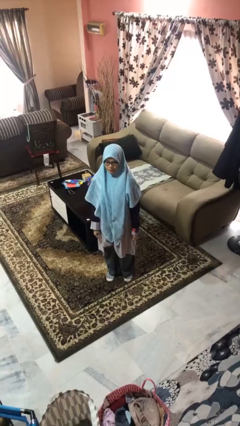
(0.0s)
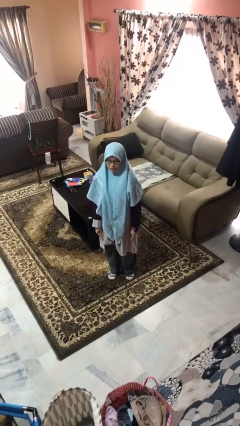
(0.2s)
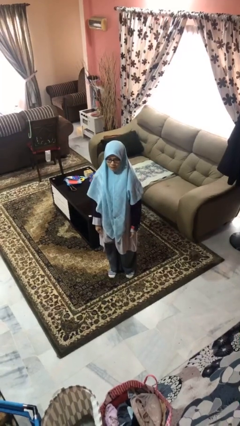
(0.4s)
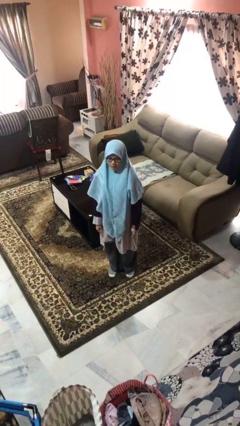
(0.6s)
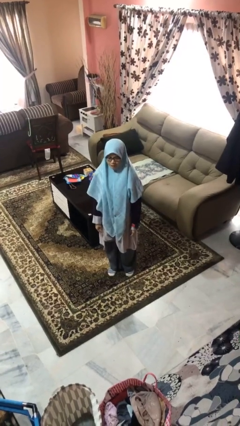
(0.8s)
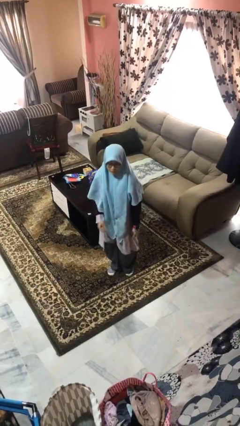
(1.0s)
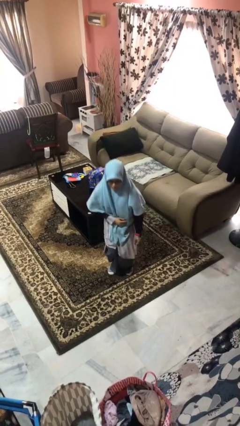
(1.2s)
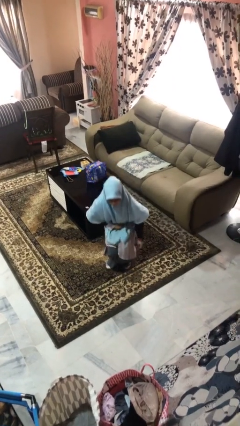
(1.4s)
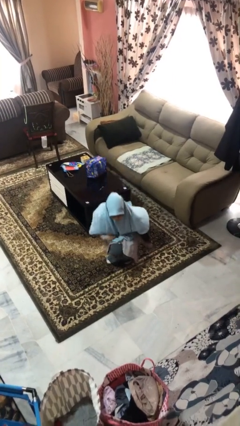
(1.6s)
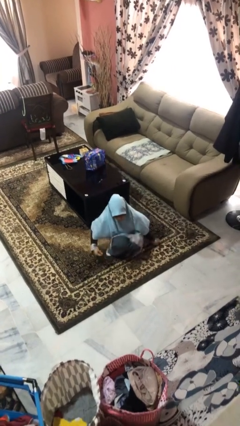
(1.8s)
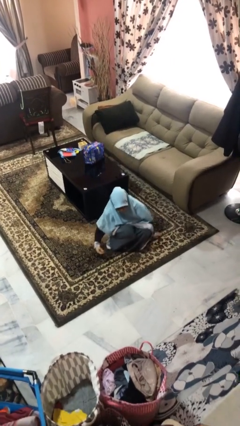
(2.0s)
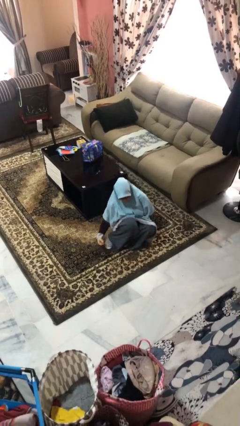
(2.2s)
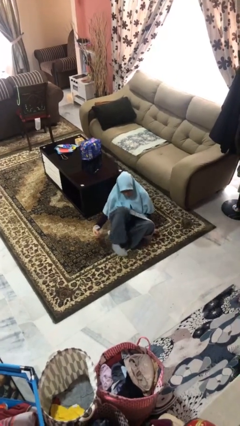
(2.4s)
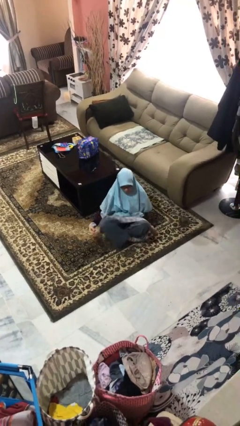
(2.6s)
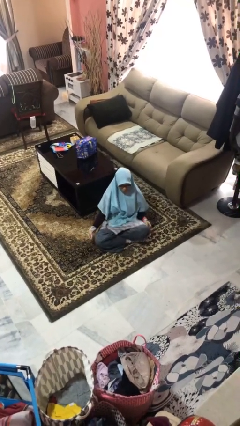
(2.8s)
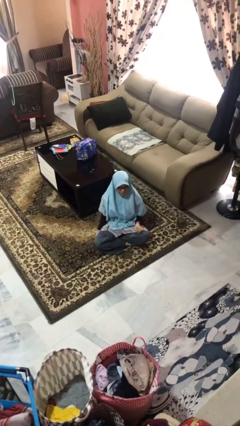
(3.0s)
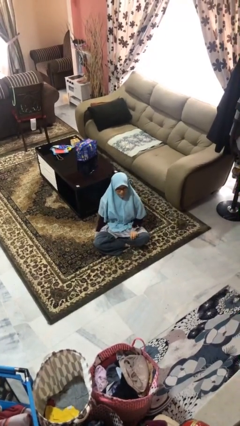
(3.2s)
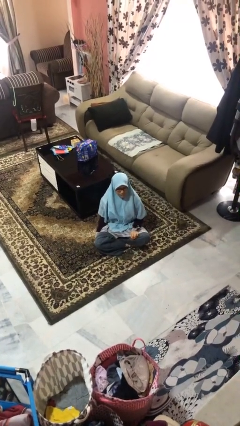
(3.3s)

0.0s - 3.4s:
person sits crisscross

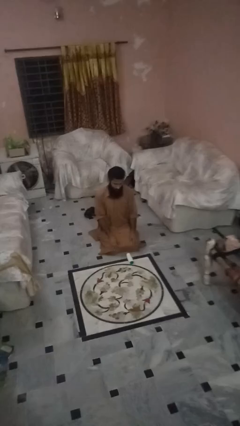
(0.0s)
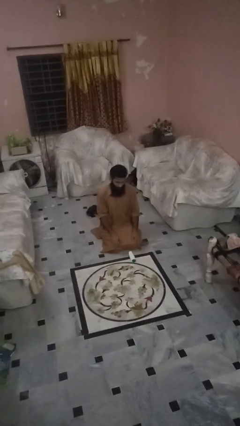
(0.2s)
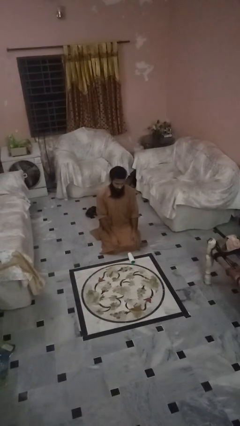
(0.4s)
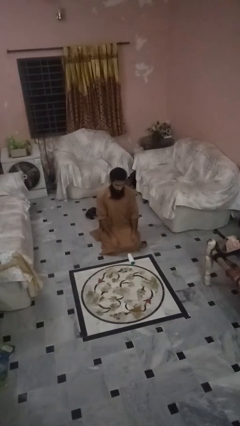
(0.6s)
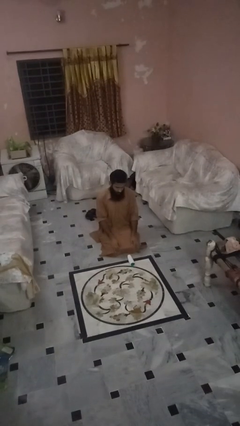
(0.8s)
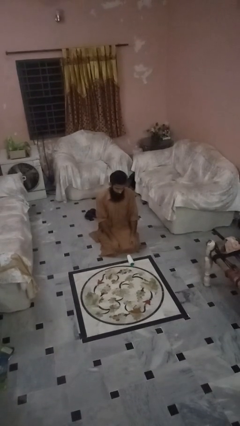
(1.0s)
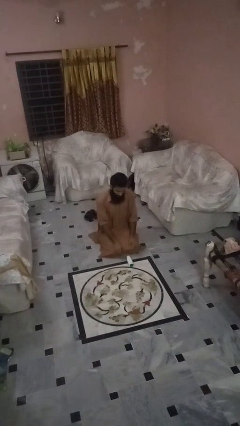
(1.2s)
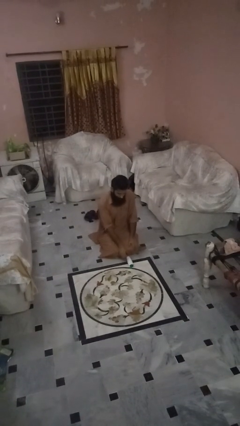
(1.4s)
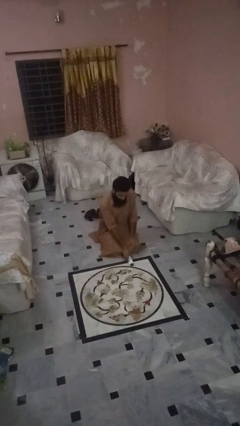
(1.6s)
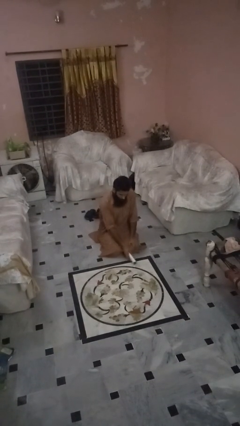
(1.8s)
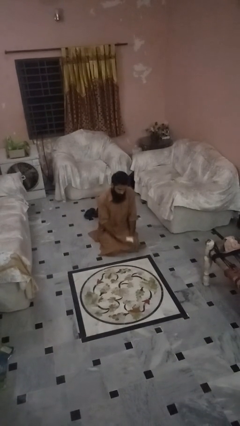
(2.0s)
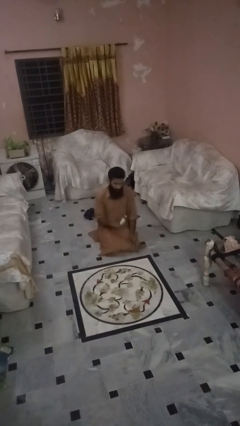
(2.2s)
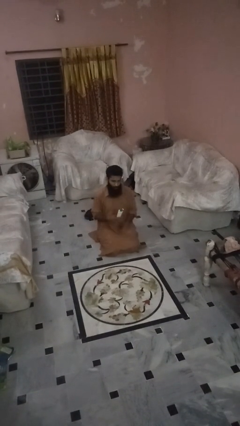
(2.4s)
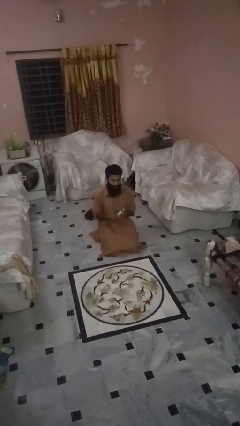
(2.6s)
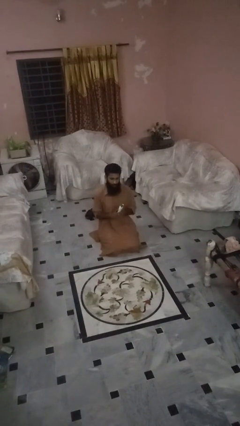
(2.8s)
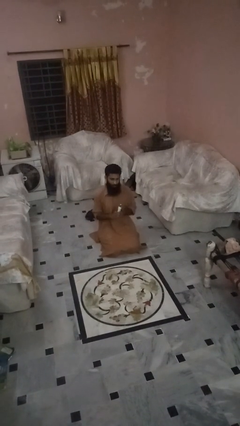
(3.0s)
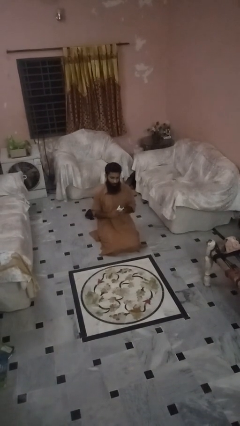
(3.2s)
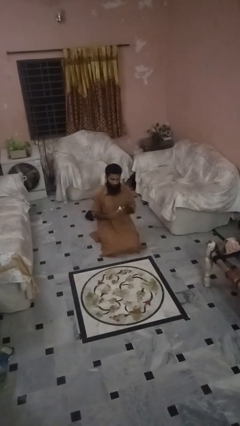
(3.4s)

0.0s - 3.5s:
person picks up object from floor

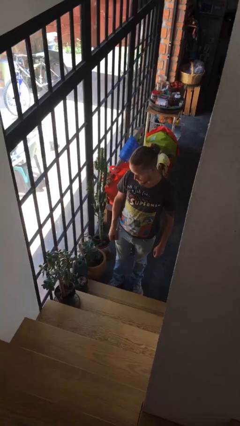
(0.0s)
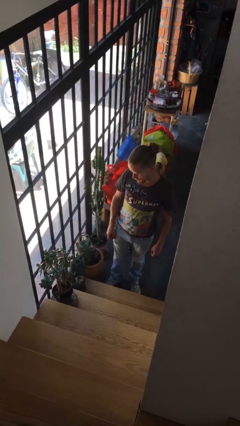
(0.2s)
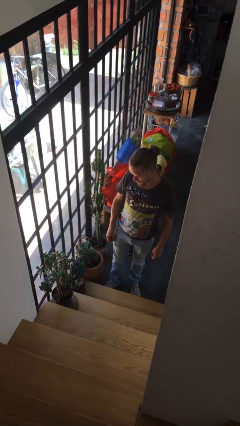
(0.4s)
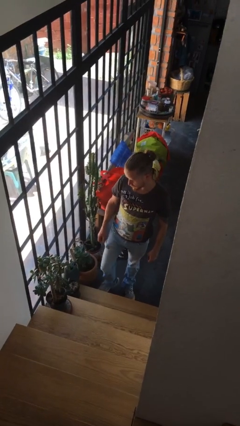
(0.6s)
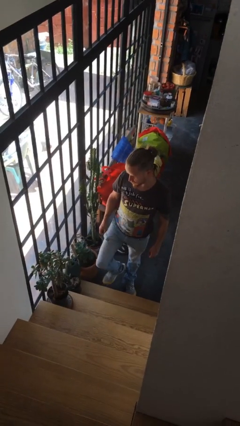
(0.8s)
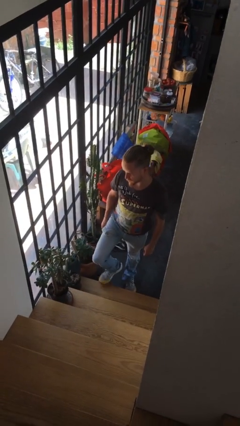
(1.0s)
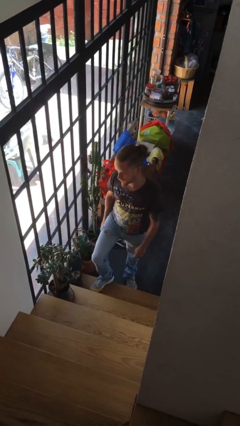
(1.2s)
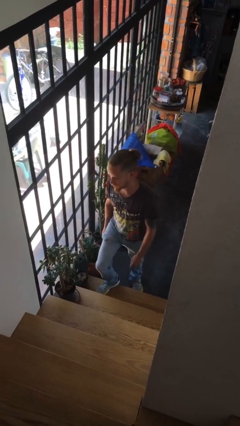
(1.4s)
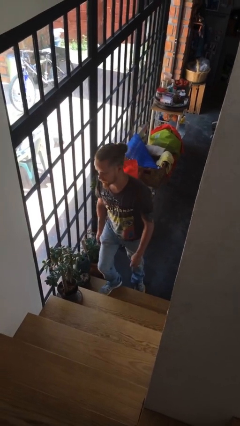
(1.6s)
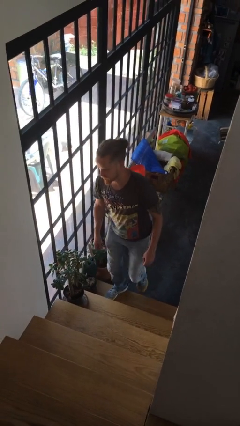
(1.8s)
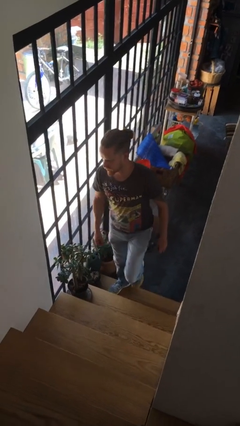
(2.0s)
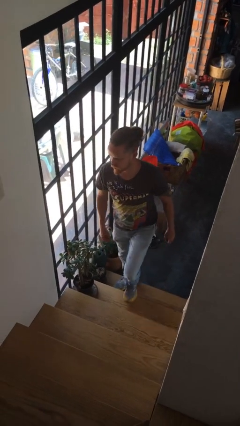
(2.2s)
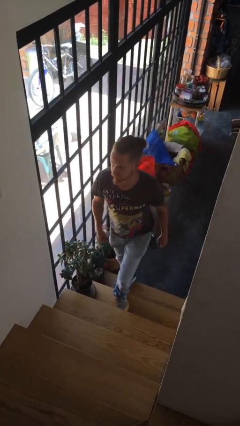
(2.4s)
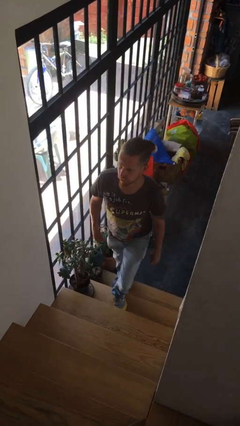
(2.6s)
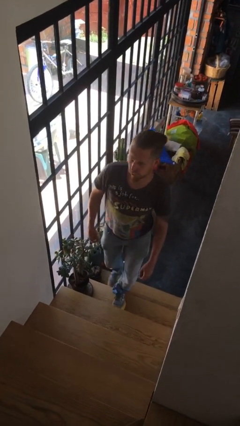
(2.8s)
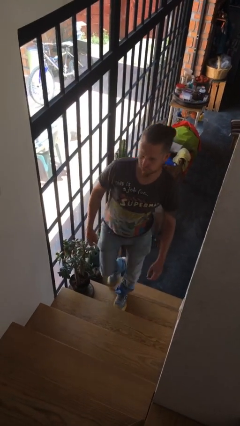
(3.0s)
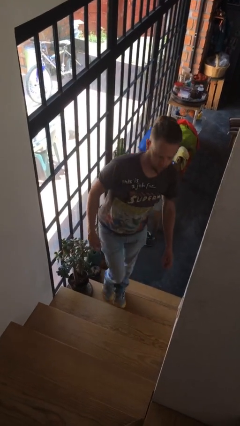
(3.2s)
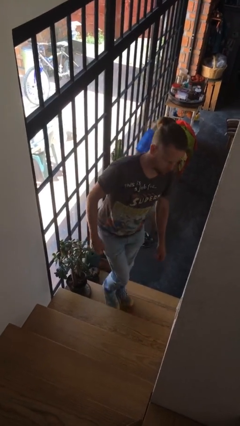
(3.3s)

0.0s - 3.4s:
person climbs up stairs

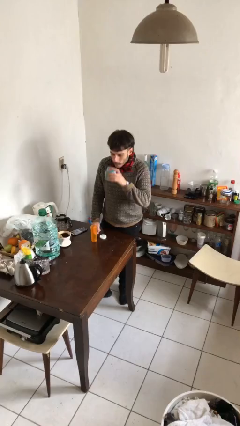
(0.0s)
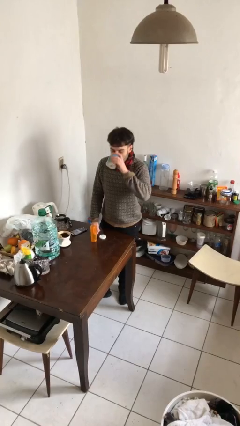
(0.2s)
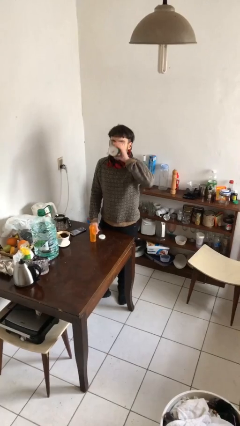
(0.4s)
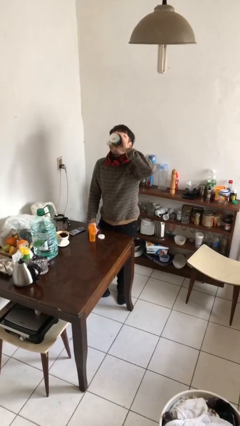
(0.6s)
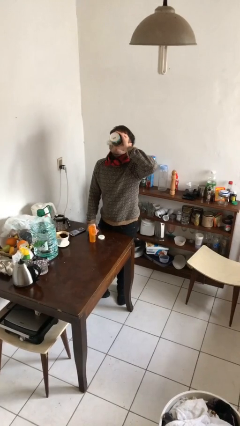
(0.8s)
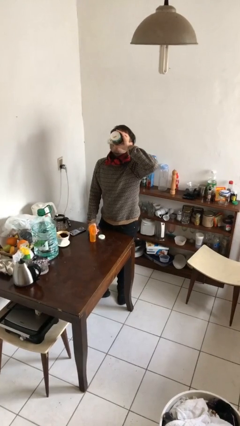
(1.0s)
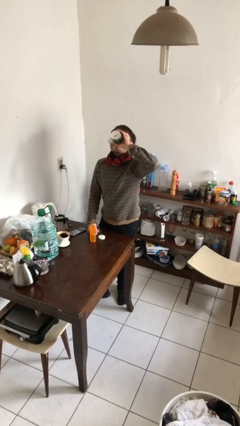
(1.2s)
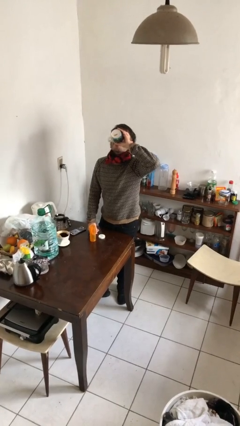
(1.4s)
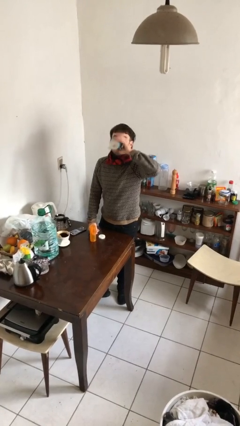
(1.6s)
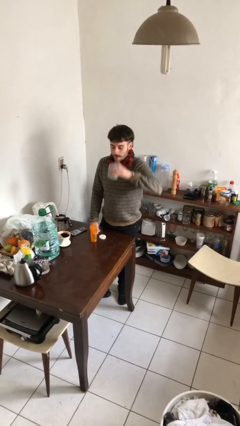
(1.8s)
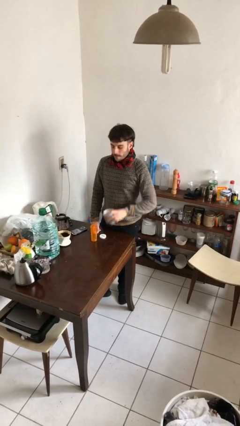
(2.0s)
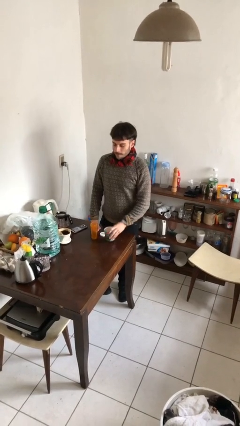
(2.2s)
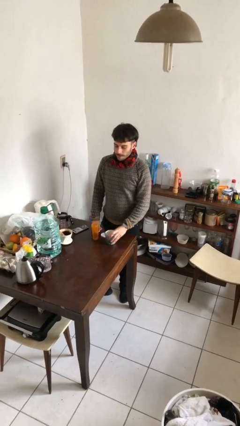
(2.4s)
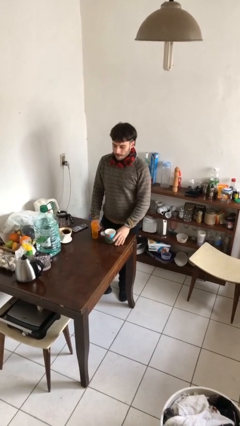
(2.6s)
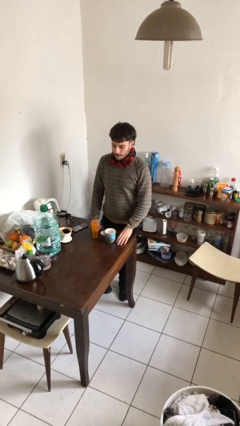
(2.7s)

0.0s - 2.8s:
person drinks from cup

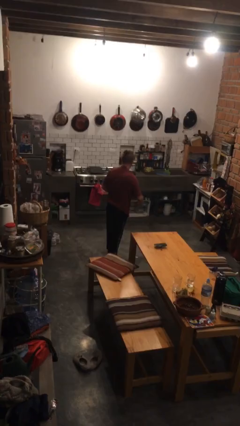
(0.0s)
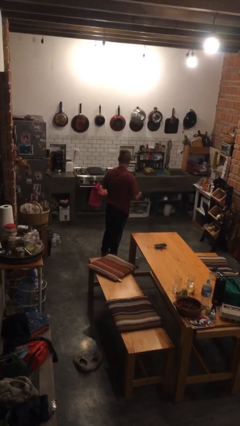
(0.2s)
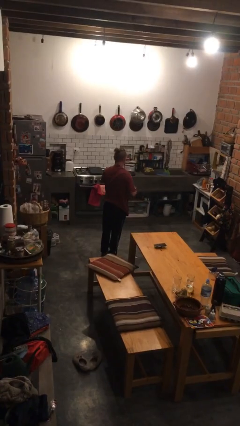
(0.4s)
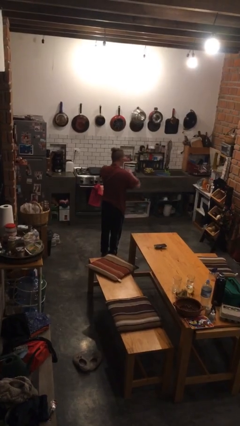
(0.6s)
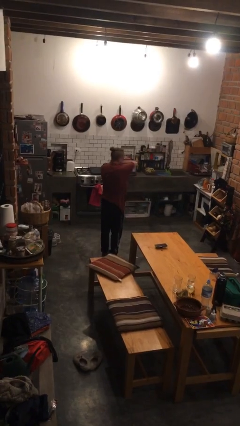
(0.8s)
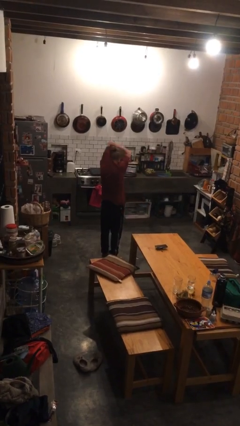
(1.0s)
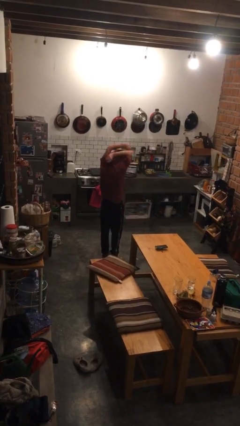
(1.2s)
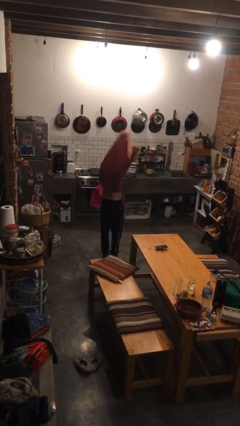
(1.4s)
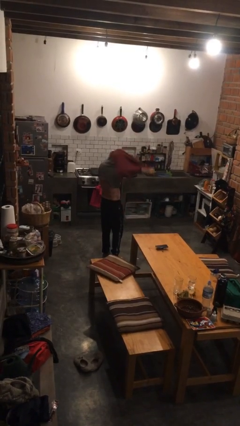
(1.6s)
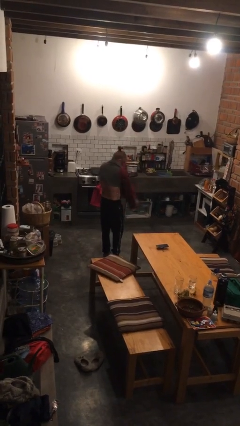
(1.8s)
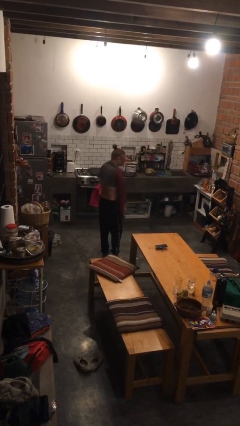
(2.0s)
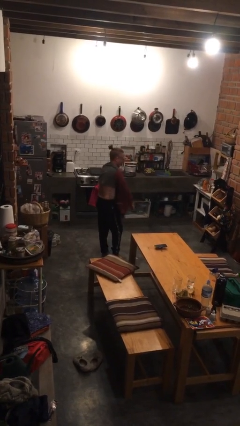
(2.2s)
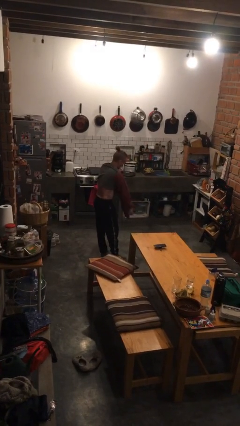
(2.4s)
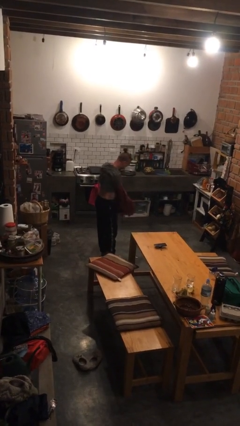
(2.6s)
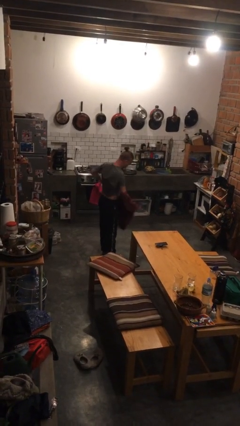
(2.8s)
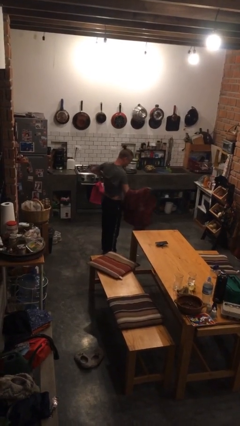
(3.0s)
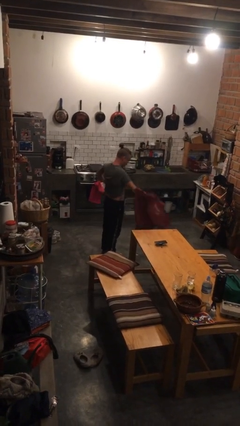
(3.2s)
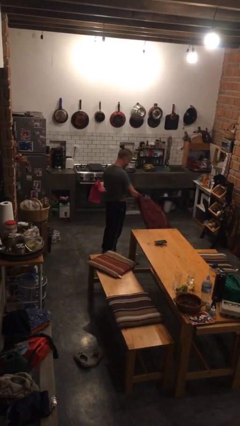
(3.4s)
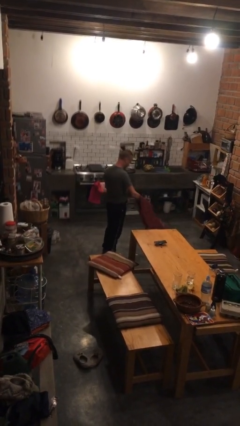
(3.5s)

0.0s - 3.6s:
person takes off shirt

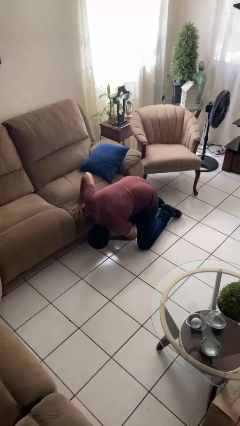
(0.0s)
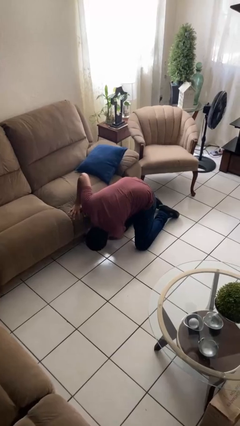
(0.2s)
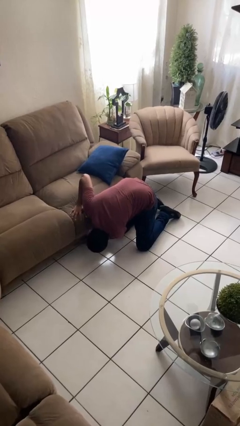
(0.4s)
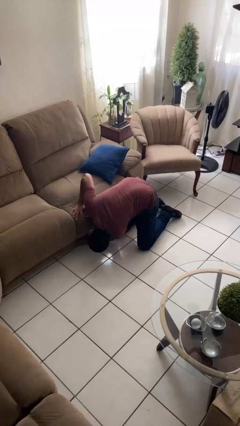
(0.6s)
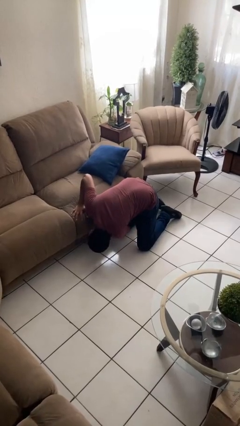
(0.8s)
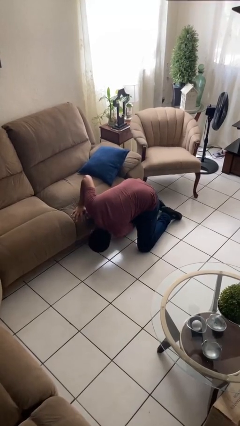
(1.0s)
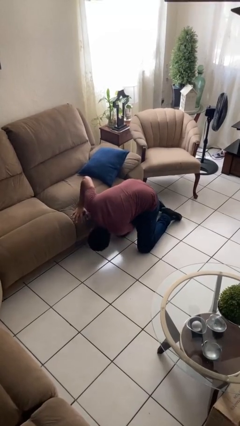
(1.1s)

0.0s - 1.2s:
person searches under couch
